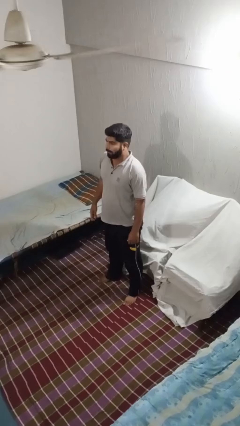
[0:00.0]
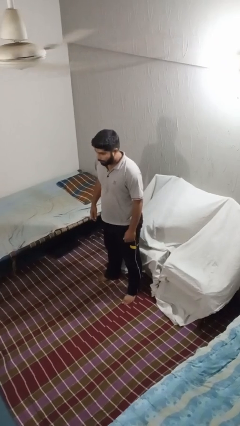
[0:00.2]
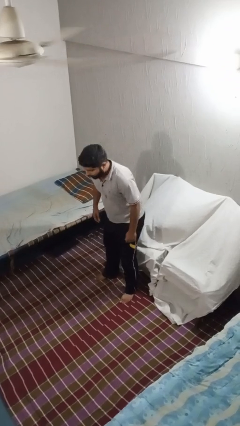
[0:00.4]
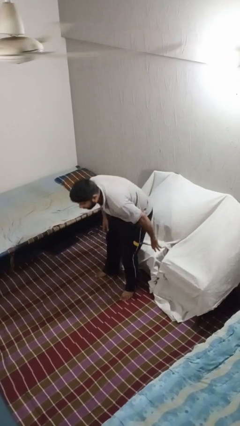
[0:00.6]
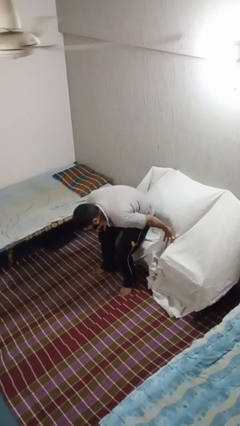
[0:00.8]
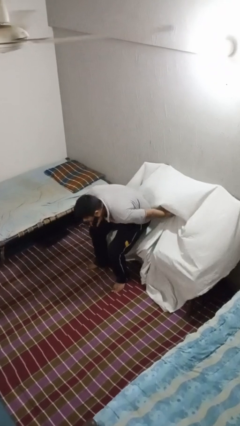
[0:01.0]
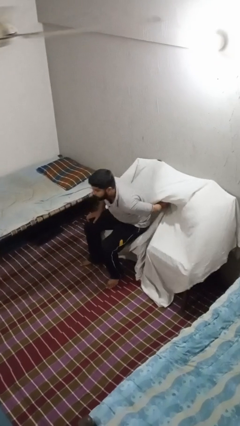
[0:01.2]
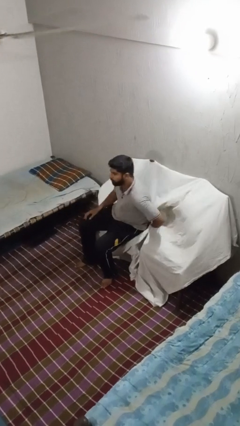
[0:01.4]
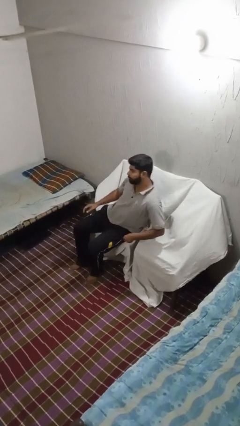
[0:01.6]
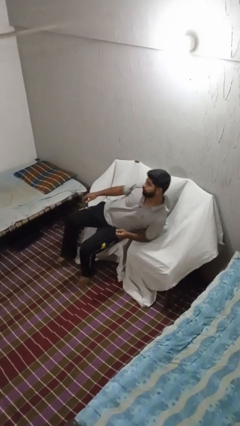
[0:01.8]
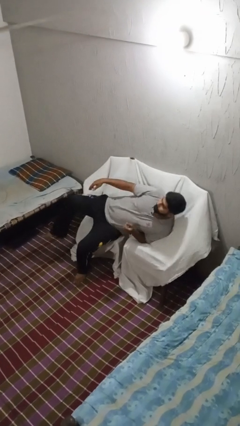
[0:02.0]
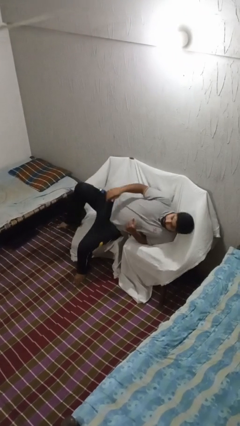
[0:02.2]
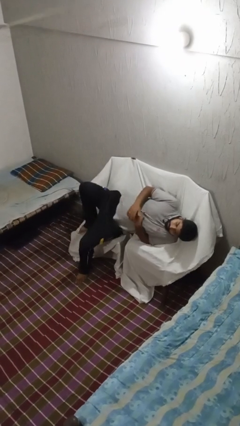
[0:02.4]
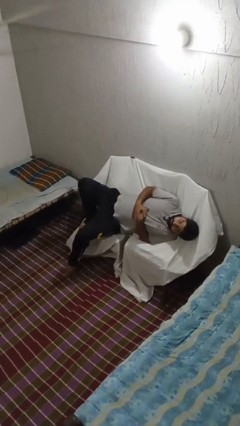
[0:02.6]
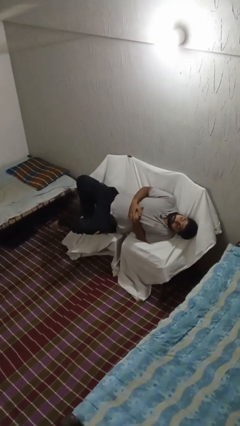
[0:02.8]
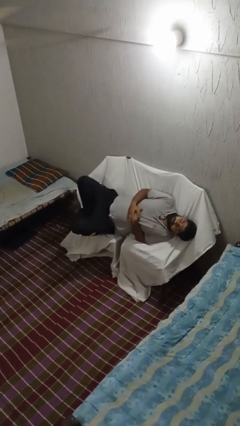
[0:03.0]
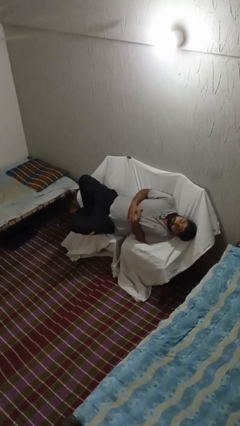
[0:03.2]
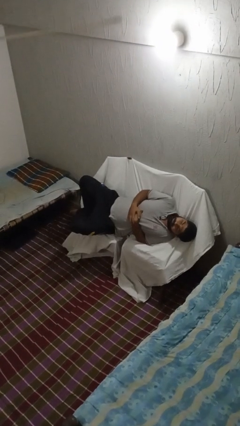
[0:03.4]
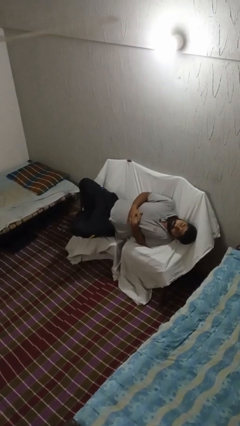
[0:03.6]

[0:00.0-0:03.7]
person lies down on couch

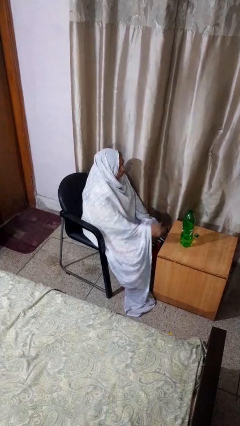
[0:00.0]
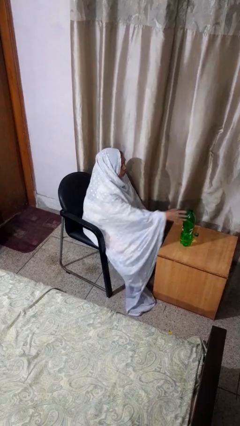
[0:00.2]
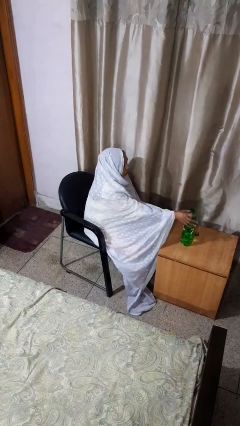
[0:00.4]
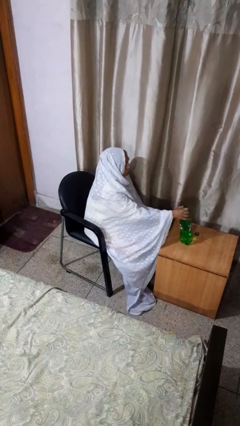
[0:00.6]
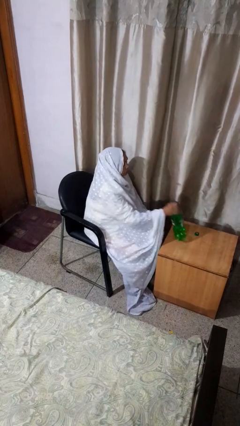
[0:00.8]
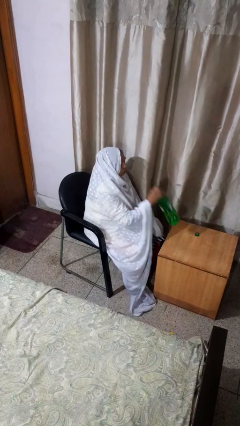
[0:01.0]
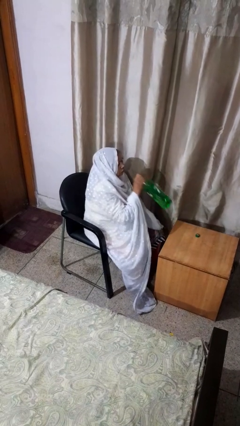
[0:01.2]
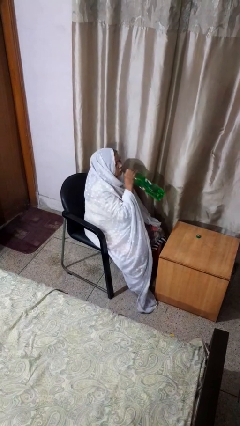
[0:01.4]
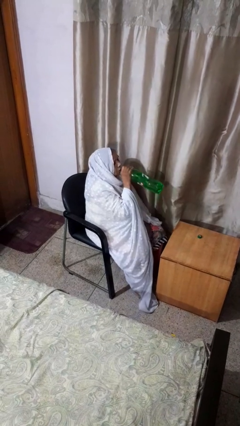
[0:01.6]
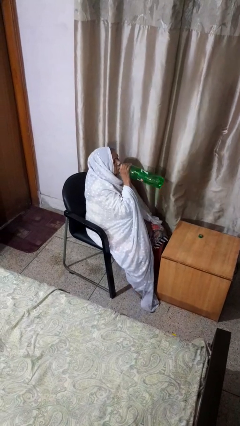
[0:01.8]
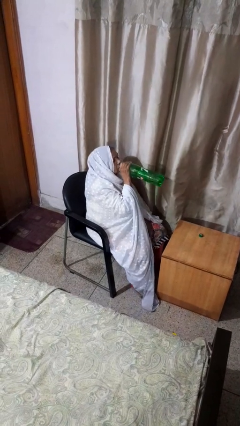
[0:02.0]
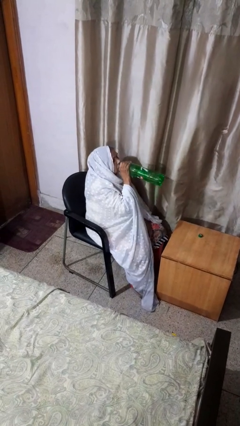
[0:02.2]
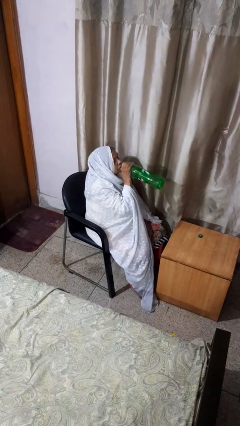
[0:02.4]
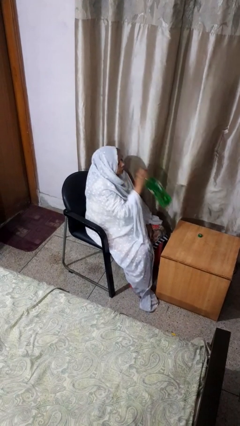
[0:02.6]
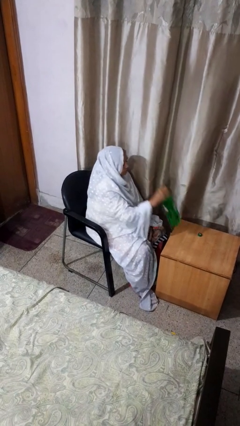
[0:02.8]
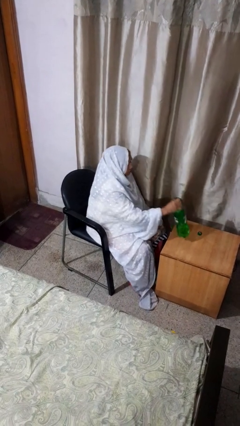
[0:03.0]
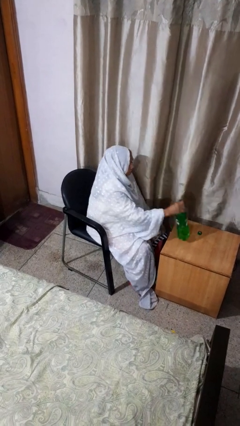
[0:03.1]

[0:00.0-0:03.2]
person drinks from bottle

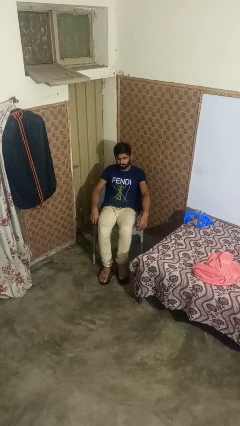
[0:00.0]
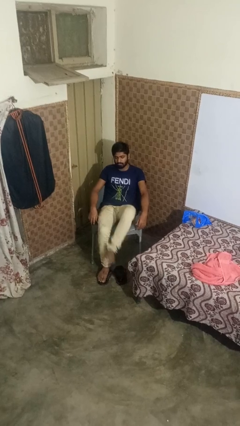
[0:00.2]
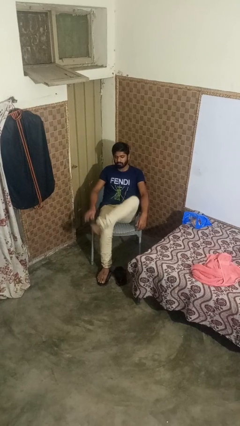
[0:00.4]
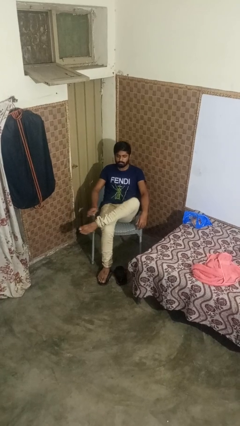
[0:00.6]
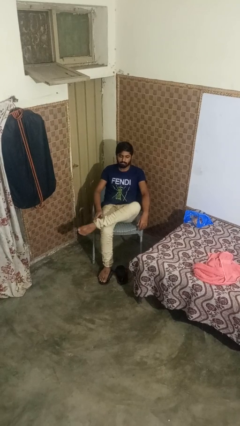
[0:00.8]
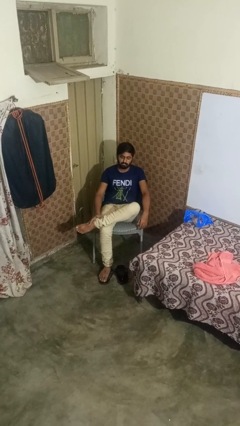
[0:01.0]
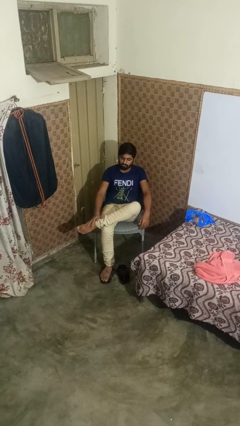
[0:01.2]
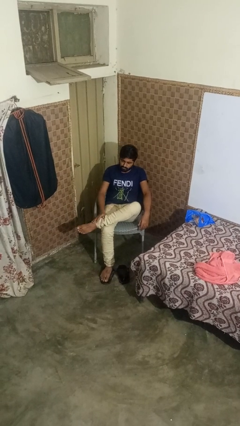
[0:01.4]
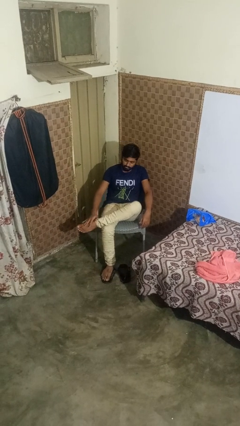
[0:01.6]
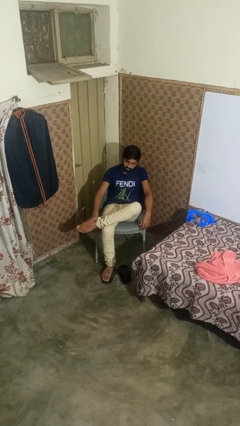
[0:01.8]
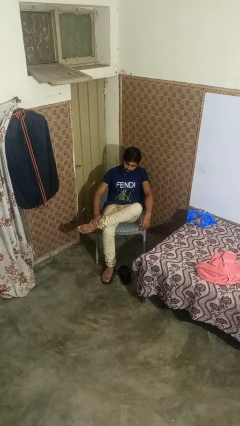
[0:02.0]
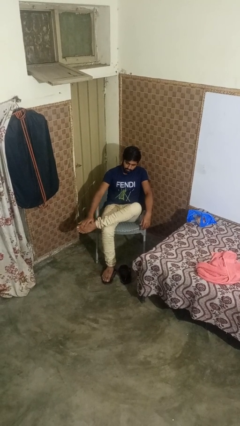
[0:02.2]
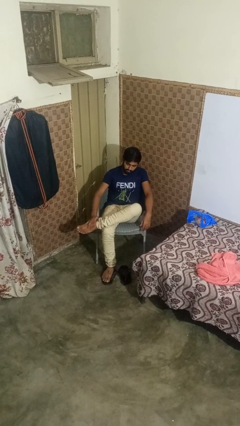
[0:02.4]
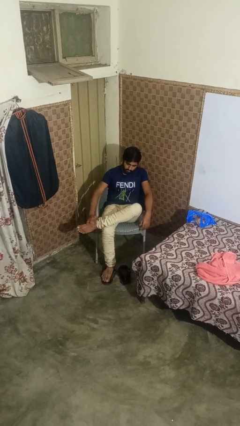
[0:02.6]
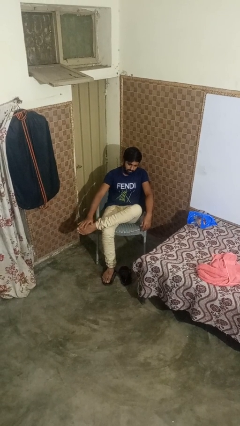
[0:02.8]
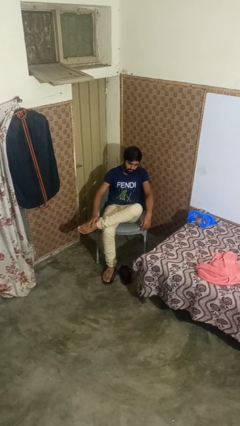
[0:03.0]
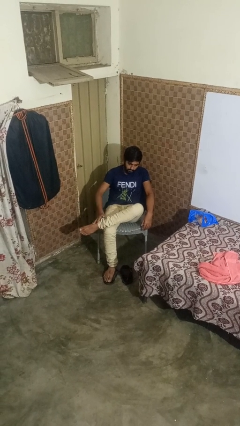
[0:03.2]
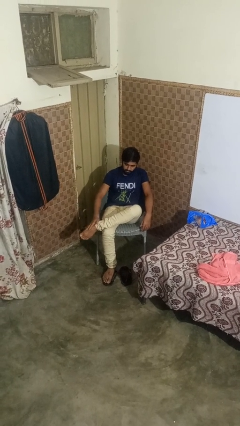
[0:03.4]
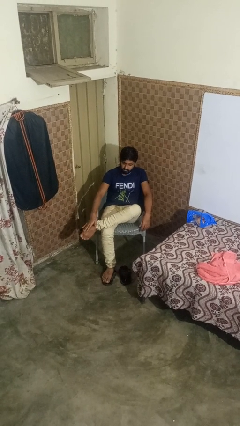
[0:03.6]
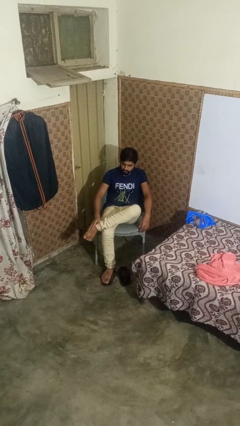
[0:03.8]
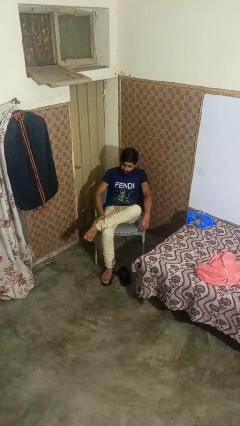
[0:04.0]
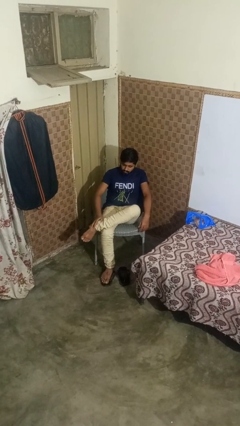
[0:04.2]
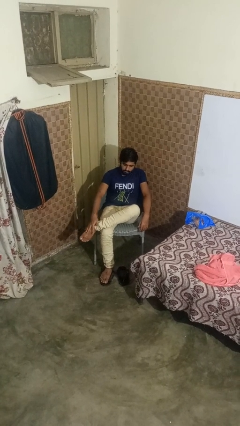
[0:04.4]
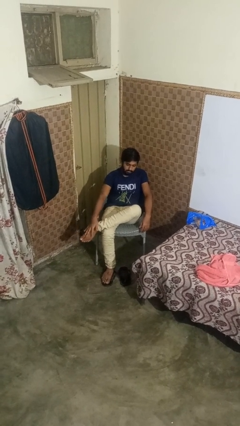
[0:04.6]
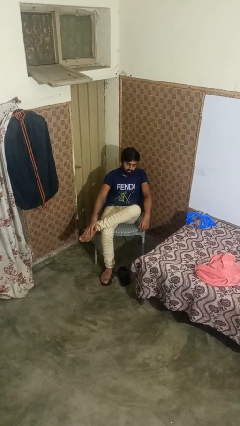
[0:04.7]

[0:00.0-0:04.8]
person rubs foot

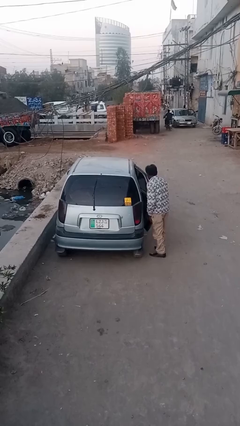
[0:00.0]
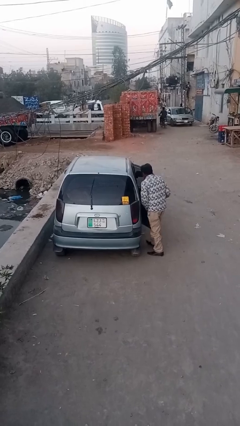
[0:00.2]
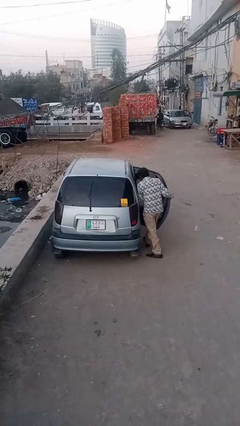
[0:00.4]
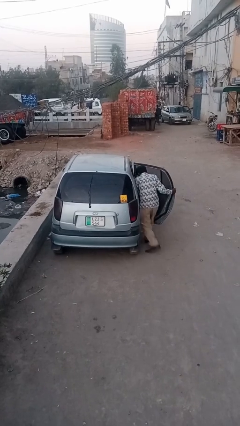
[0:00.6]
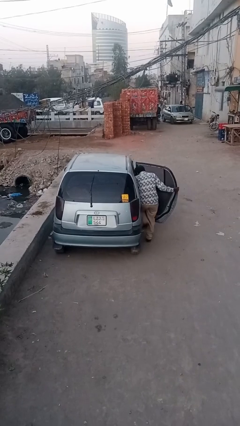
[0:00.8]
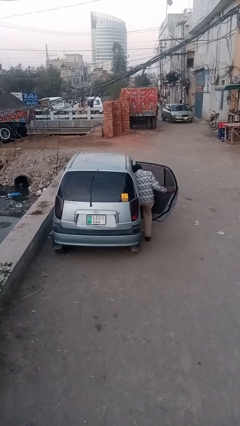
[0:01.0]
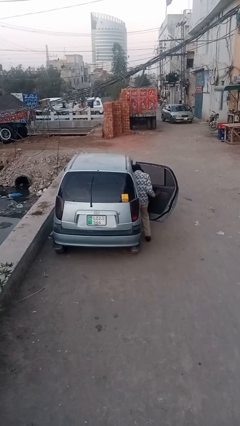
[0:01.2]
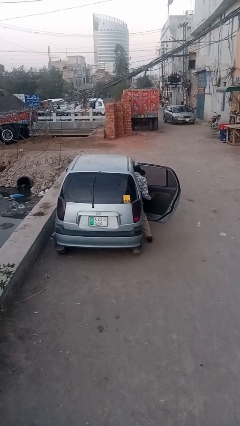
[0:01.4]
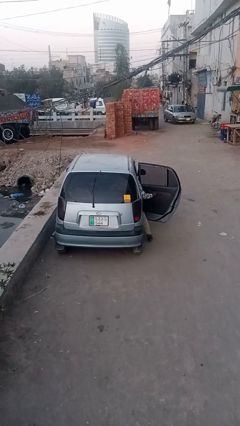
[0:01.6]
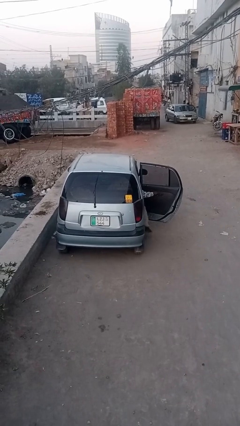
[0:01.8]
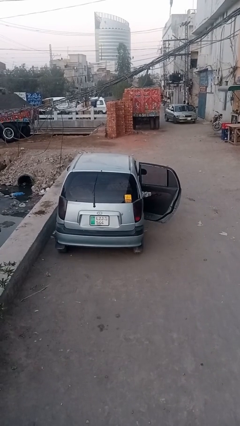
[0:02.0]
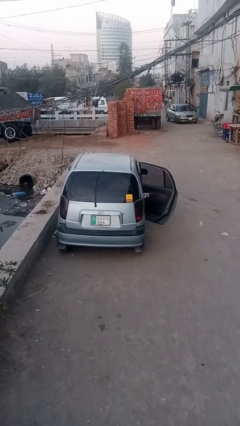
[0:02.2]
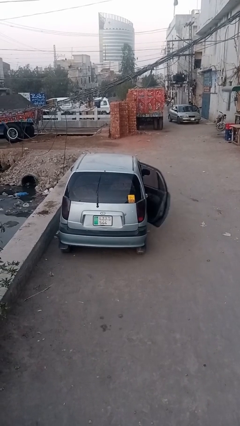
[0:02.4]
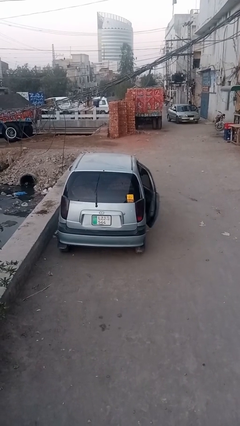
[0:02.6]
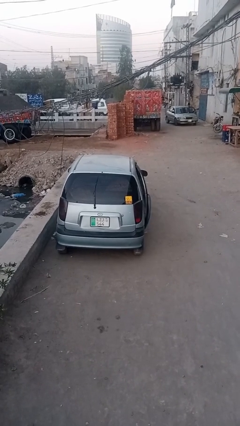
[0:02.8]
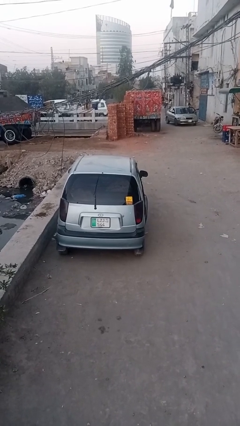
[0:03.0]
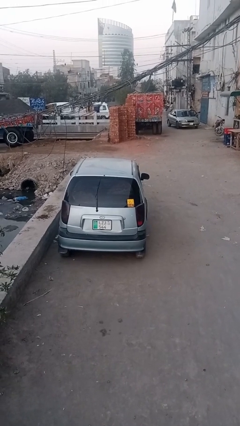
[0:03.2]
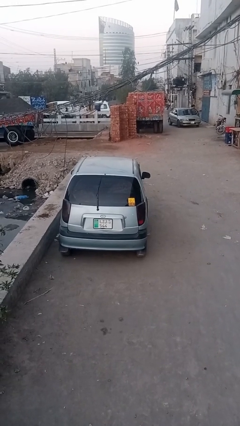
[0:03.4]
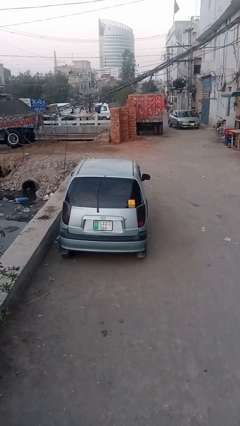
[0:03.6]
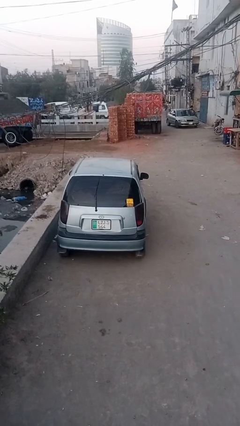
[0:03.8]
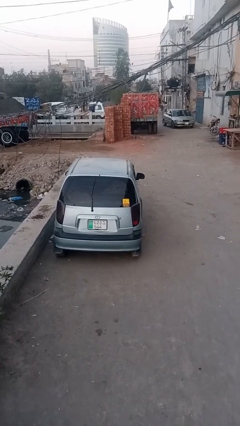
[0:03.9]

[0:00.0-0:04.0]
car picks up person

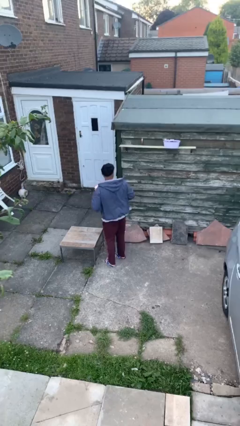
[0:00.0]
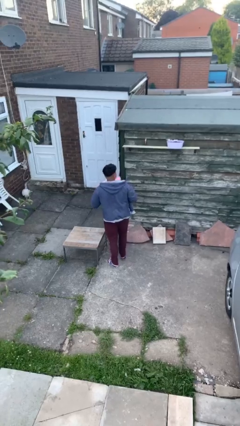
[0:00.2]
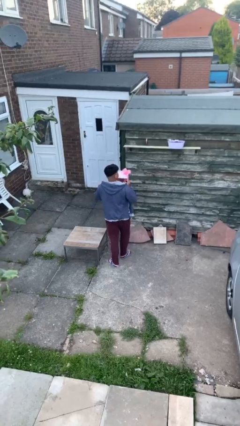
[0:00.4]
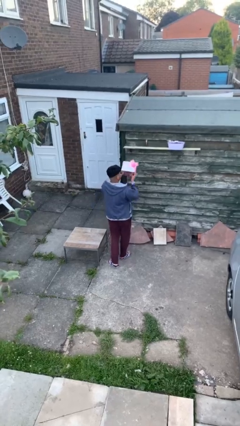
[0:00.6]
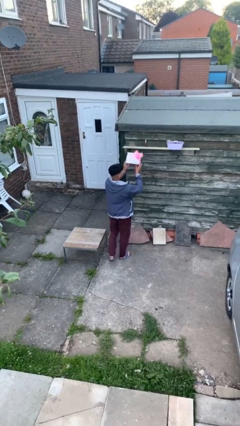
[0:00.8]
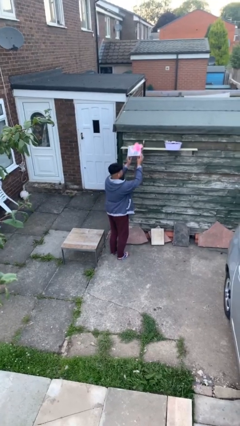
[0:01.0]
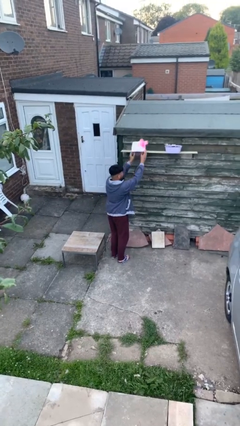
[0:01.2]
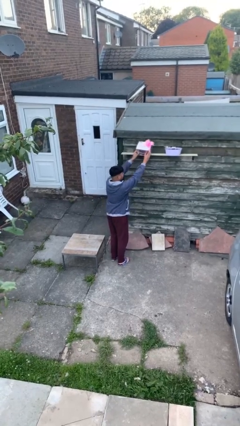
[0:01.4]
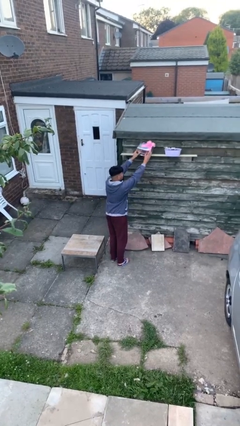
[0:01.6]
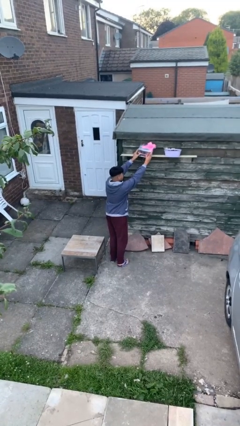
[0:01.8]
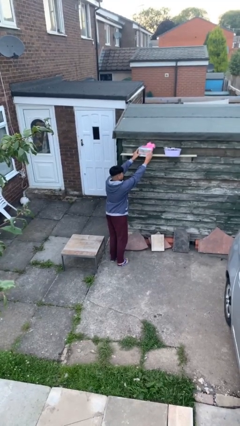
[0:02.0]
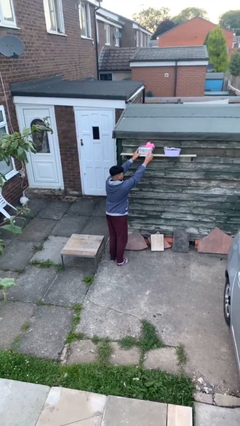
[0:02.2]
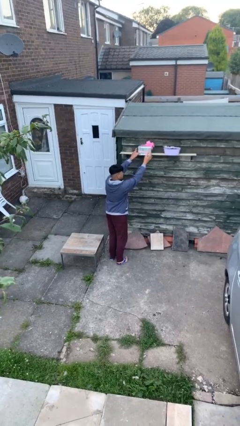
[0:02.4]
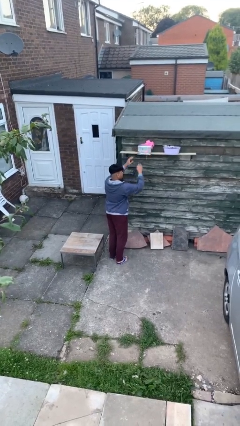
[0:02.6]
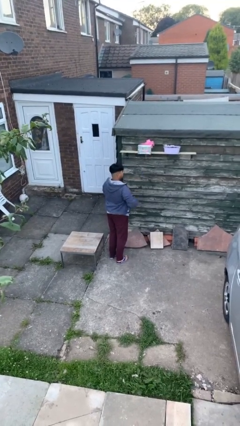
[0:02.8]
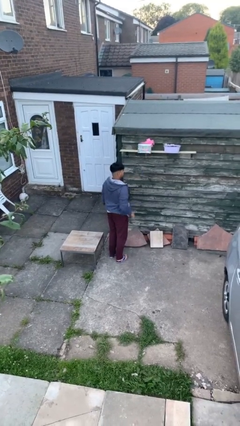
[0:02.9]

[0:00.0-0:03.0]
person puts down object on shelf
